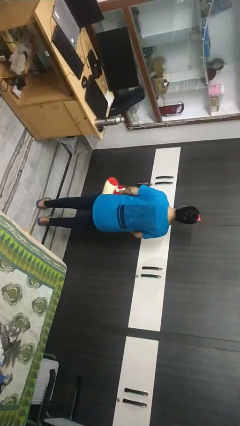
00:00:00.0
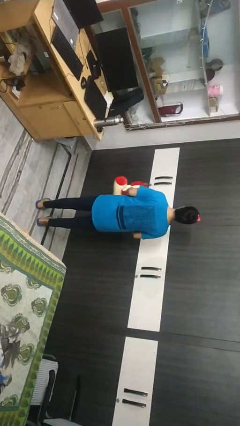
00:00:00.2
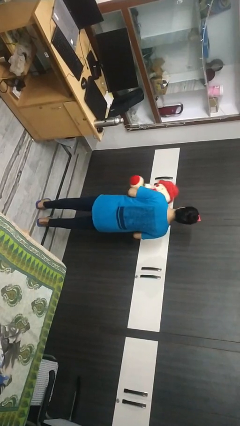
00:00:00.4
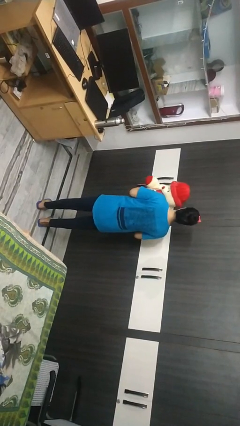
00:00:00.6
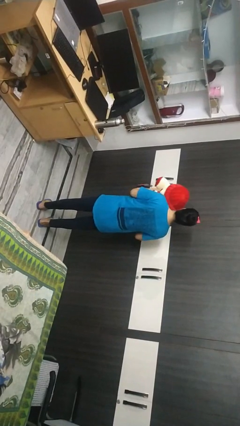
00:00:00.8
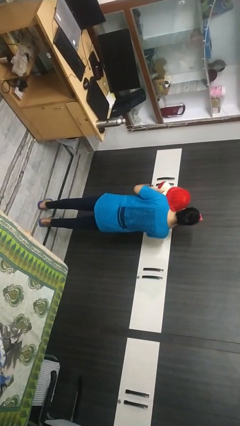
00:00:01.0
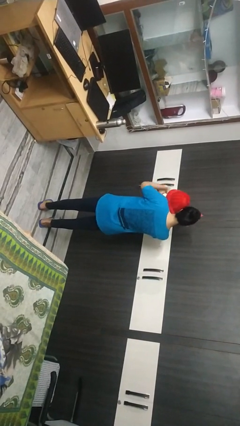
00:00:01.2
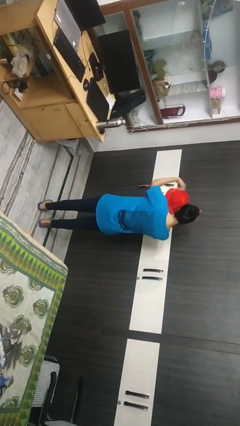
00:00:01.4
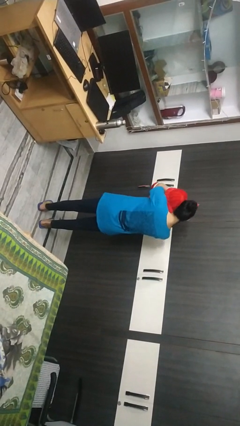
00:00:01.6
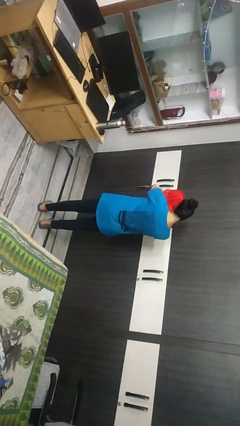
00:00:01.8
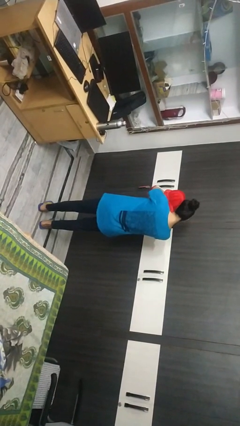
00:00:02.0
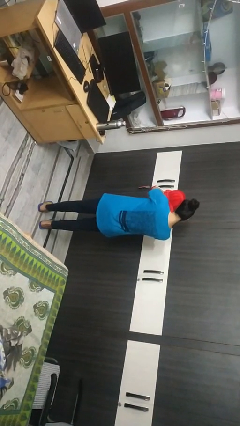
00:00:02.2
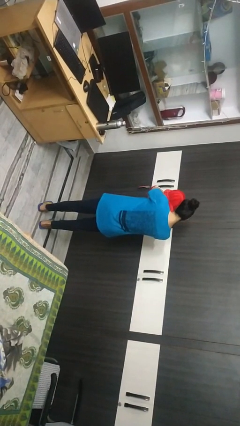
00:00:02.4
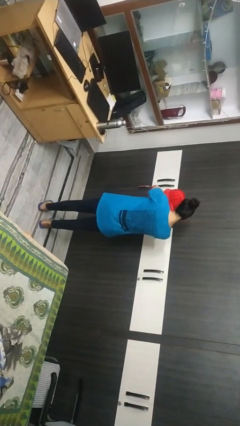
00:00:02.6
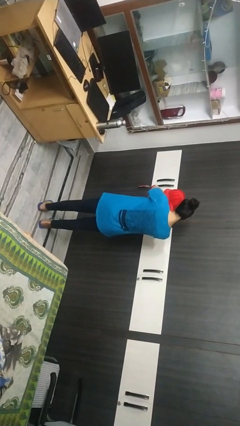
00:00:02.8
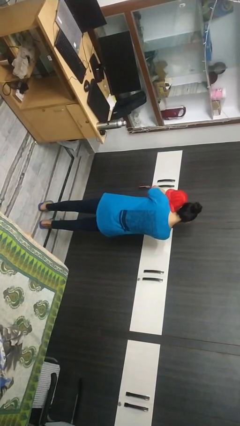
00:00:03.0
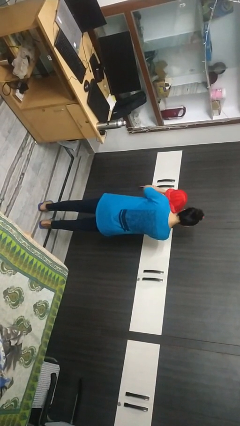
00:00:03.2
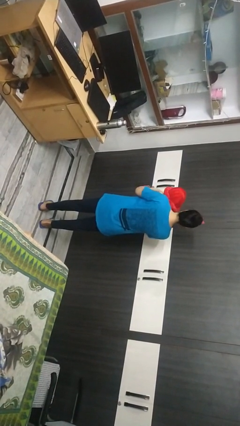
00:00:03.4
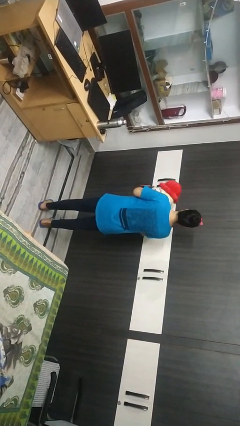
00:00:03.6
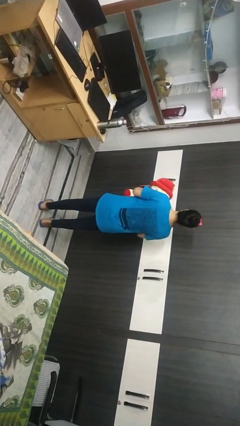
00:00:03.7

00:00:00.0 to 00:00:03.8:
person hugs stuffed animal

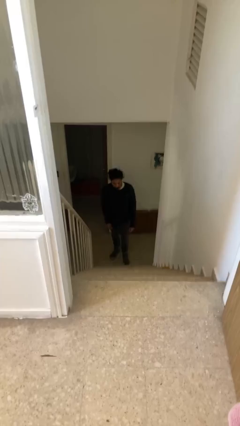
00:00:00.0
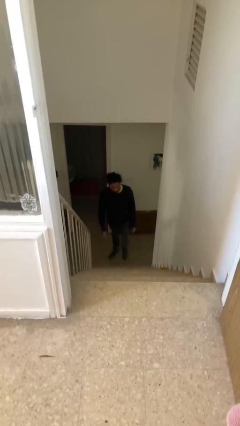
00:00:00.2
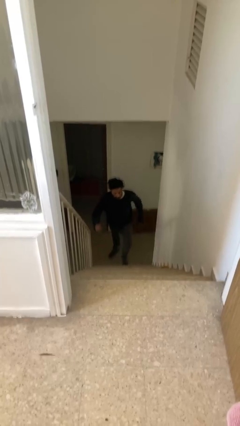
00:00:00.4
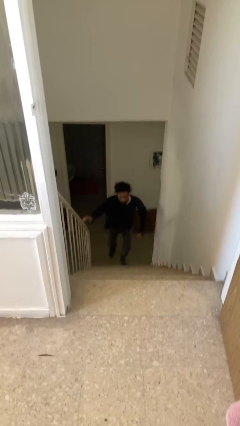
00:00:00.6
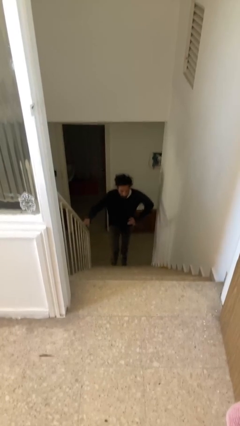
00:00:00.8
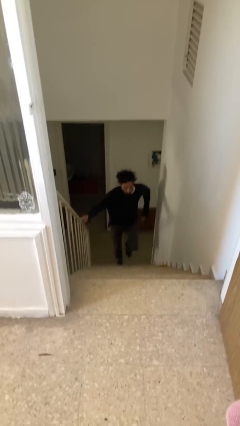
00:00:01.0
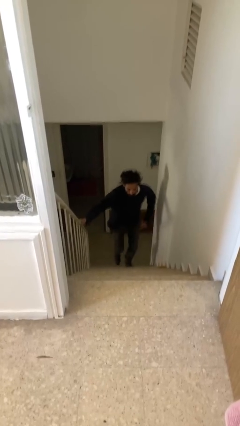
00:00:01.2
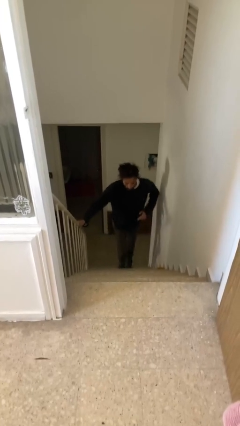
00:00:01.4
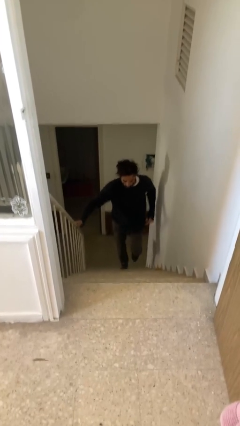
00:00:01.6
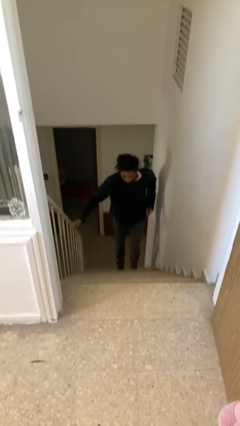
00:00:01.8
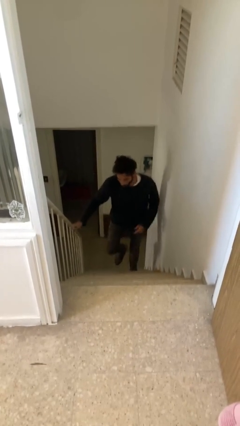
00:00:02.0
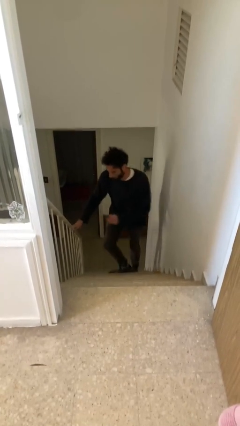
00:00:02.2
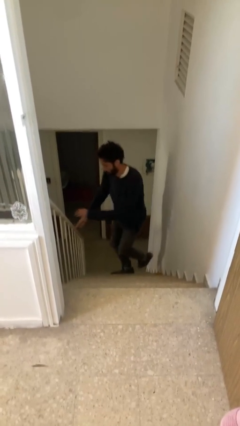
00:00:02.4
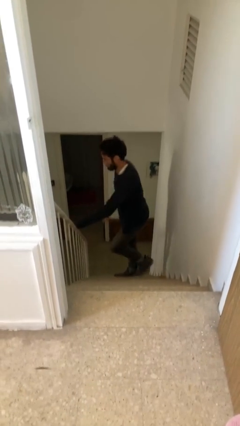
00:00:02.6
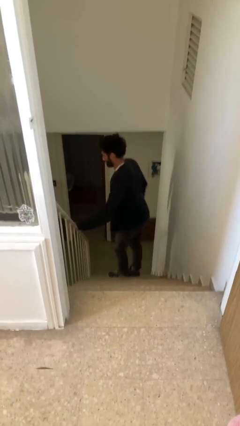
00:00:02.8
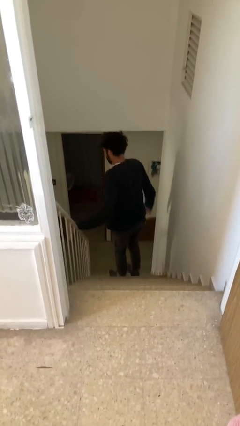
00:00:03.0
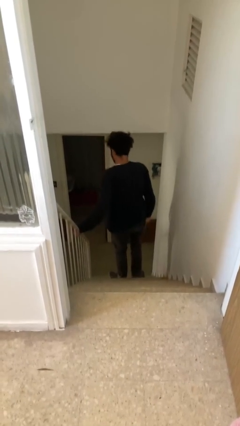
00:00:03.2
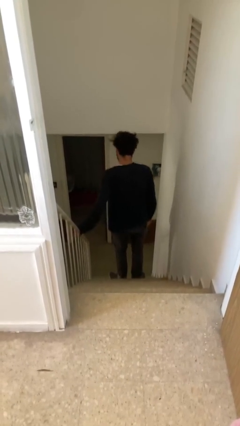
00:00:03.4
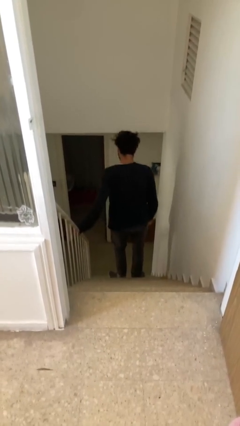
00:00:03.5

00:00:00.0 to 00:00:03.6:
person climbs up stairs

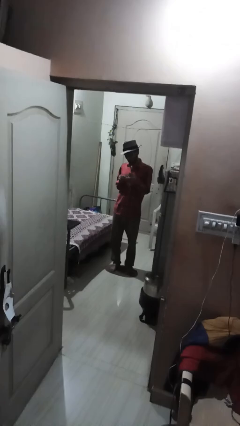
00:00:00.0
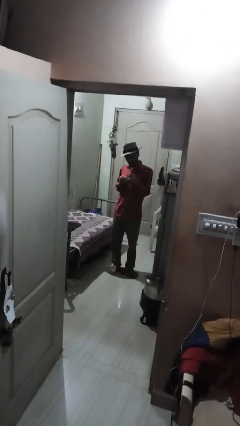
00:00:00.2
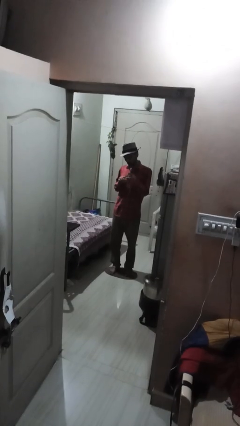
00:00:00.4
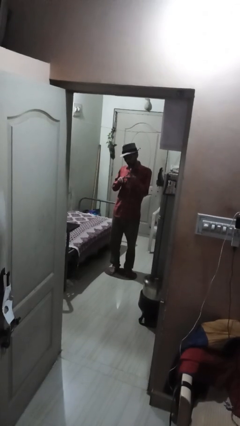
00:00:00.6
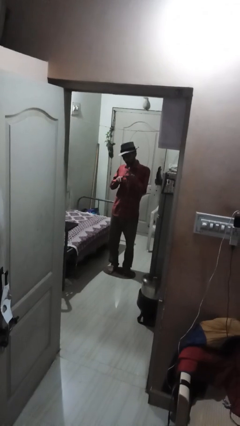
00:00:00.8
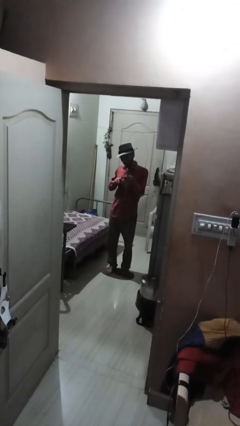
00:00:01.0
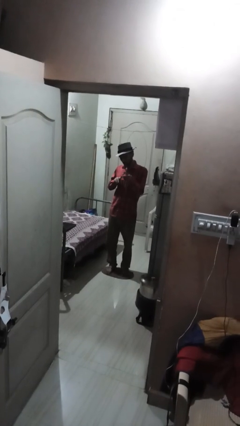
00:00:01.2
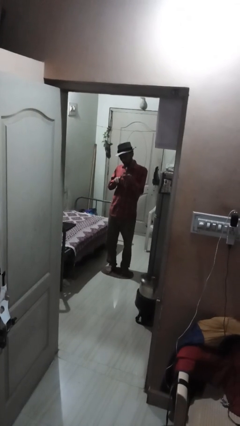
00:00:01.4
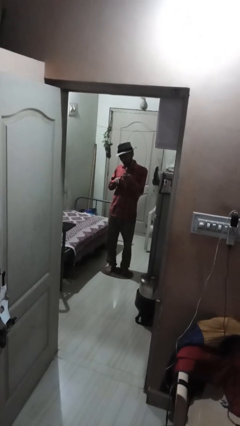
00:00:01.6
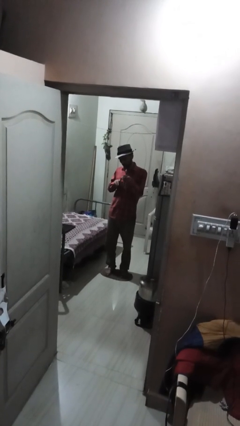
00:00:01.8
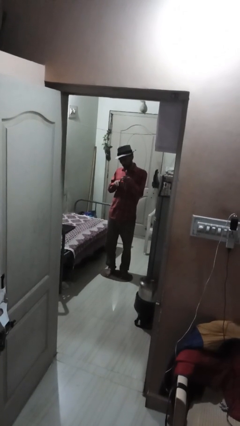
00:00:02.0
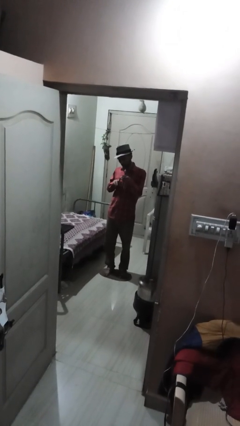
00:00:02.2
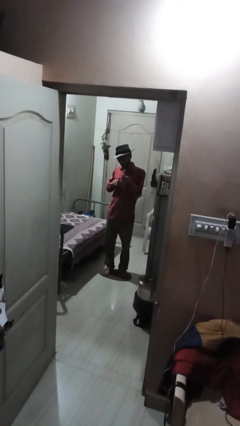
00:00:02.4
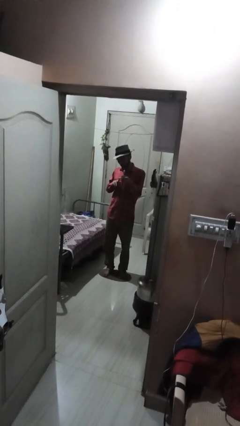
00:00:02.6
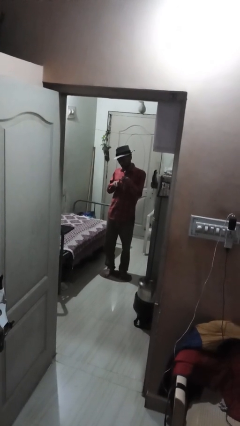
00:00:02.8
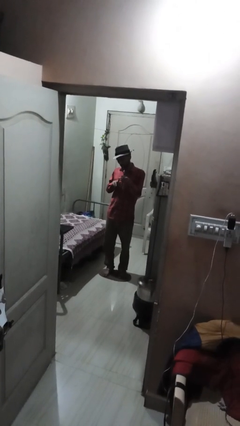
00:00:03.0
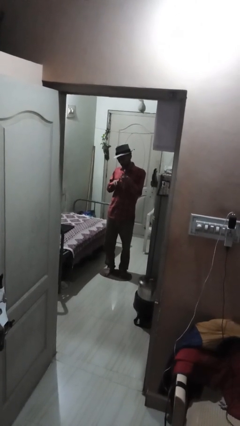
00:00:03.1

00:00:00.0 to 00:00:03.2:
person clips fingernails

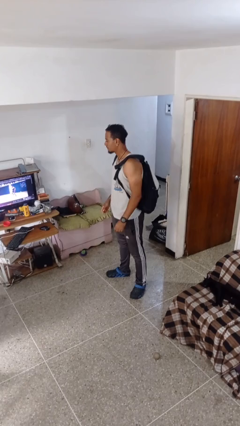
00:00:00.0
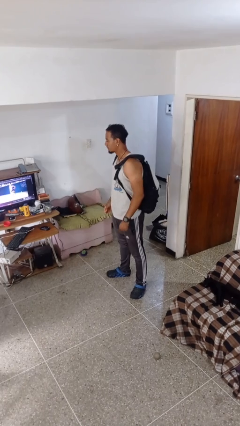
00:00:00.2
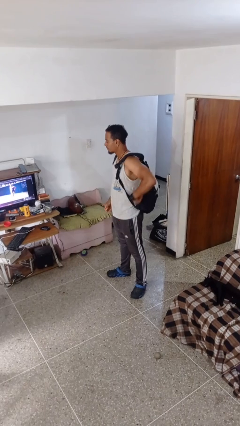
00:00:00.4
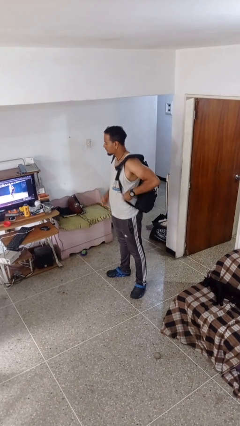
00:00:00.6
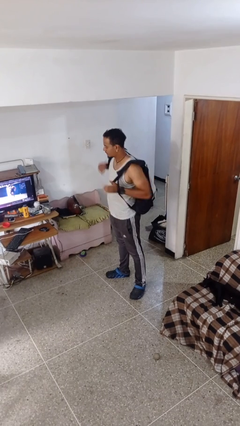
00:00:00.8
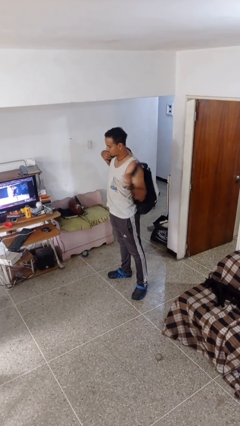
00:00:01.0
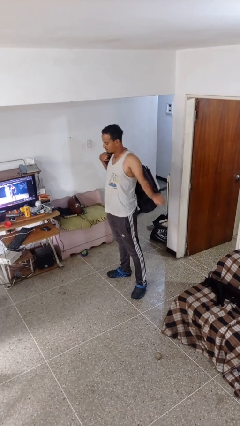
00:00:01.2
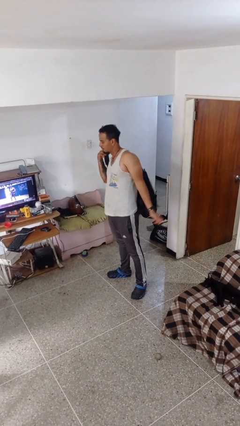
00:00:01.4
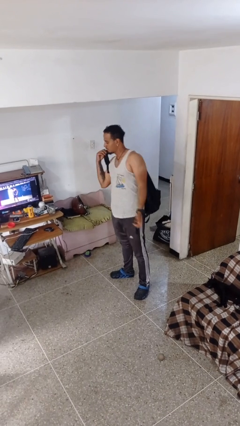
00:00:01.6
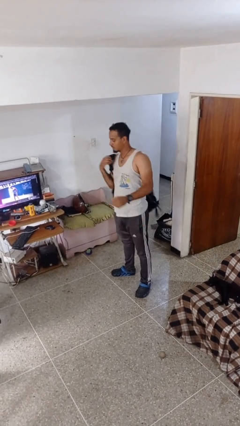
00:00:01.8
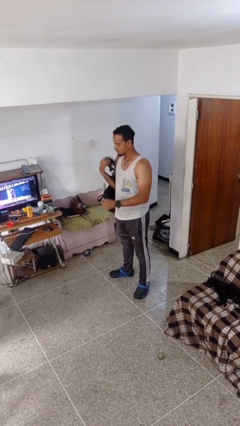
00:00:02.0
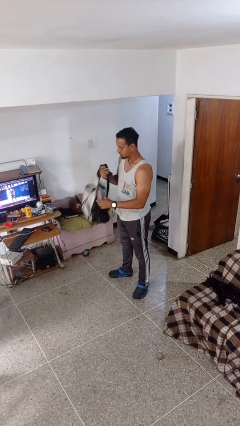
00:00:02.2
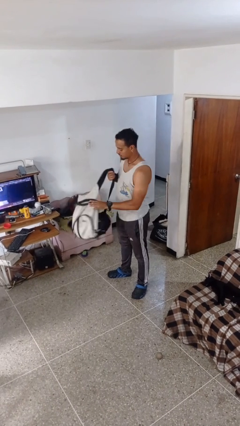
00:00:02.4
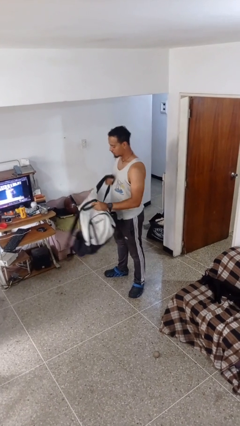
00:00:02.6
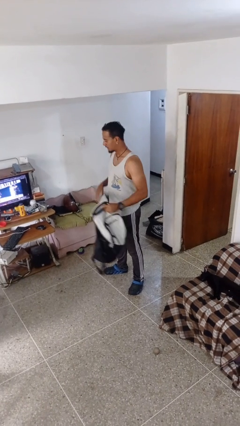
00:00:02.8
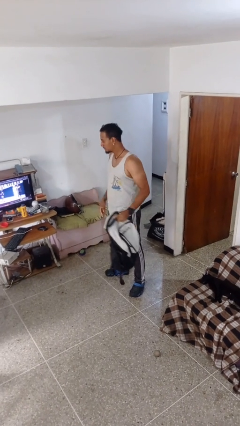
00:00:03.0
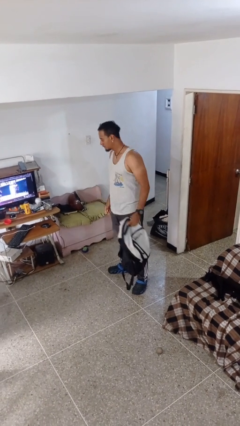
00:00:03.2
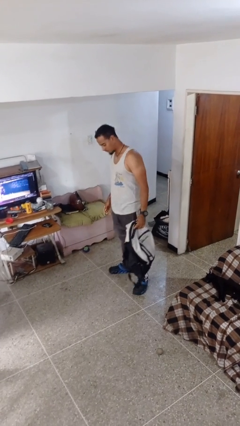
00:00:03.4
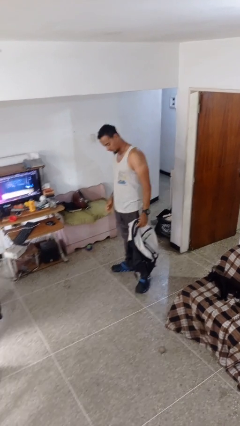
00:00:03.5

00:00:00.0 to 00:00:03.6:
person takes off backpack

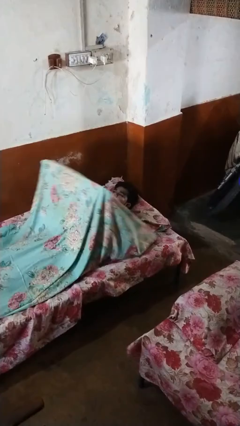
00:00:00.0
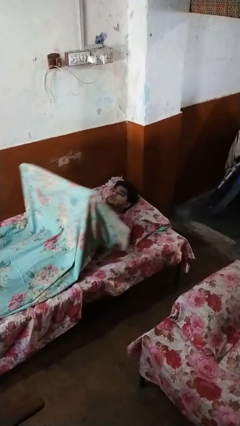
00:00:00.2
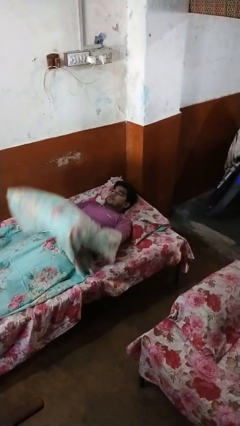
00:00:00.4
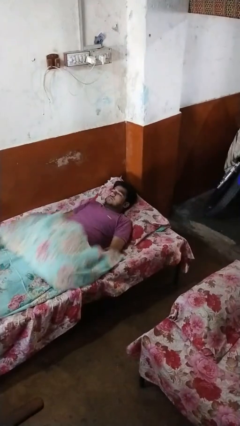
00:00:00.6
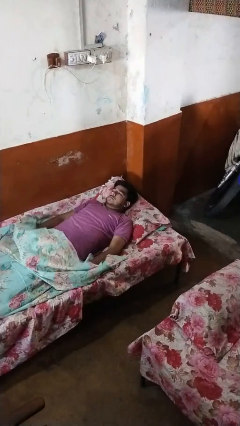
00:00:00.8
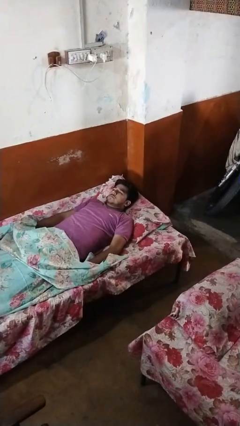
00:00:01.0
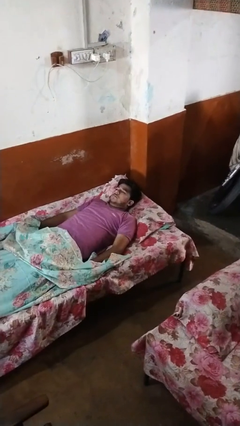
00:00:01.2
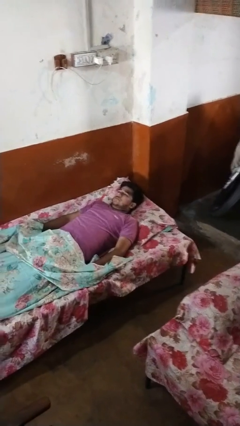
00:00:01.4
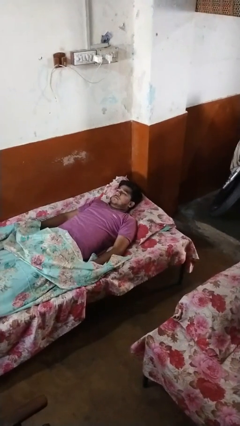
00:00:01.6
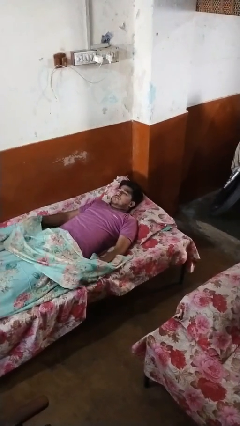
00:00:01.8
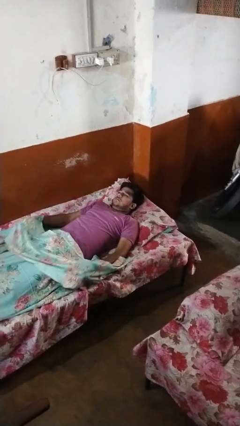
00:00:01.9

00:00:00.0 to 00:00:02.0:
person uncovers with bedsheets

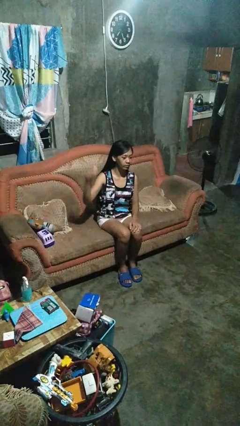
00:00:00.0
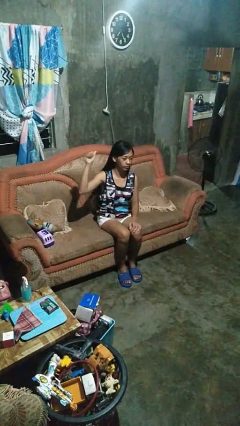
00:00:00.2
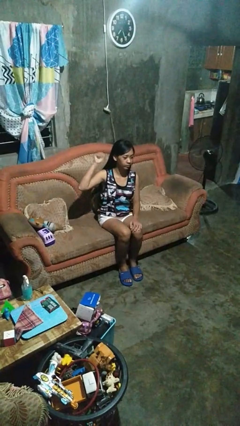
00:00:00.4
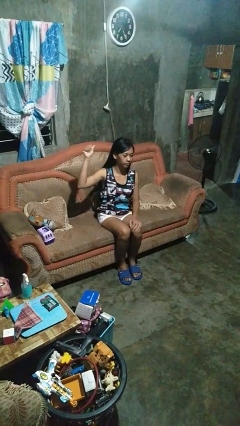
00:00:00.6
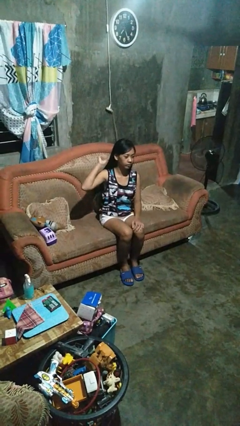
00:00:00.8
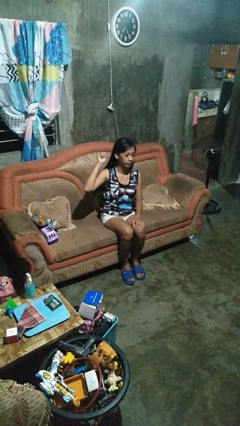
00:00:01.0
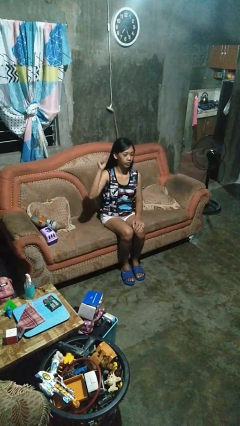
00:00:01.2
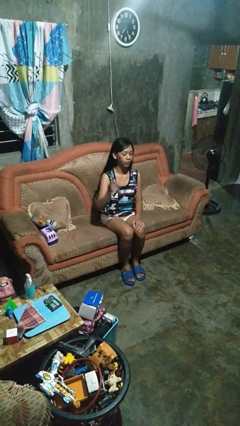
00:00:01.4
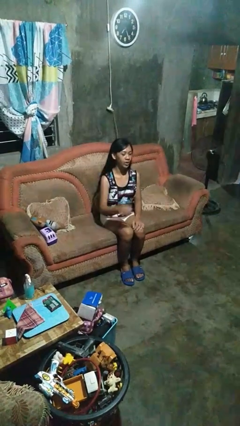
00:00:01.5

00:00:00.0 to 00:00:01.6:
person gestures behind me
